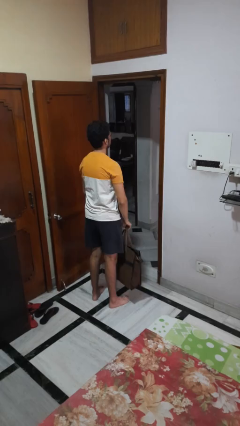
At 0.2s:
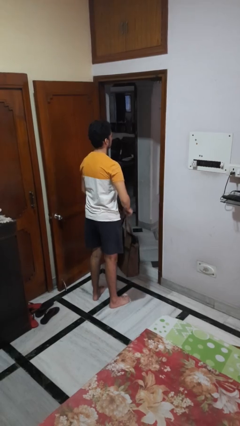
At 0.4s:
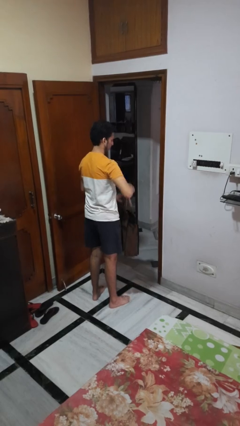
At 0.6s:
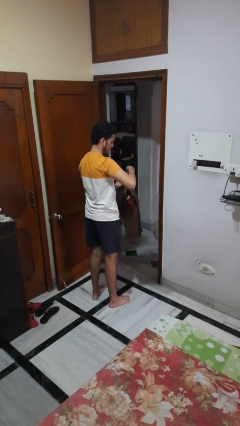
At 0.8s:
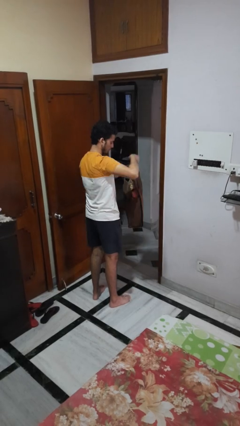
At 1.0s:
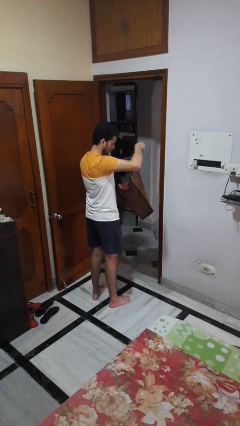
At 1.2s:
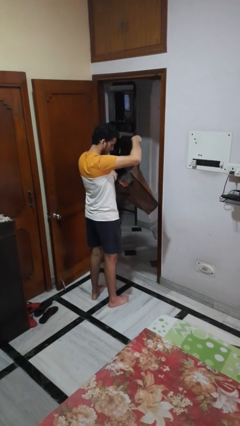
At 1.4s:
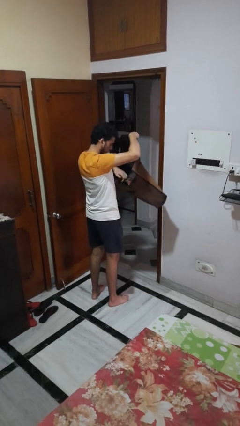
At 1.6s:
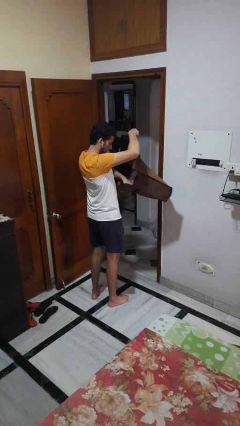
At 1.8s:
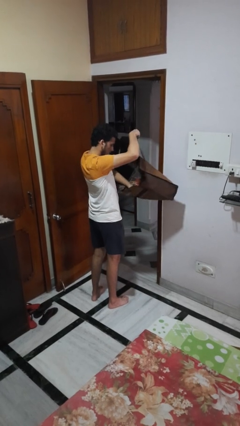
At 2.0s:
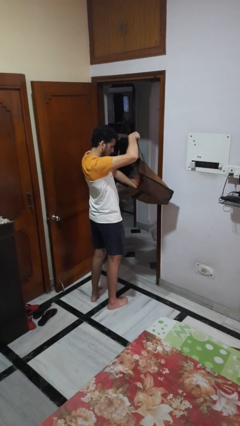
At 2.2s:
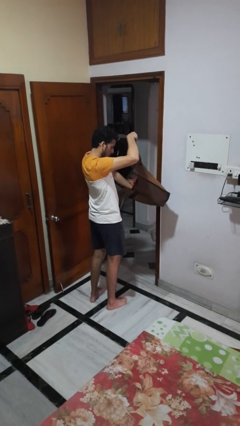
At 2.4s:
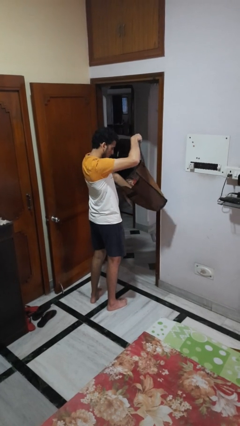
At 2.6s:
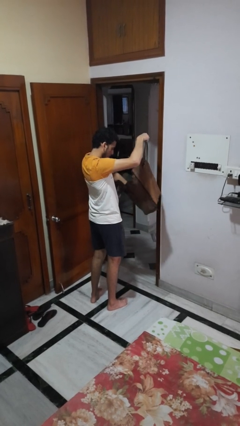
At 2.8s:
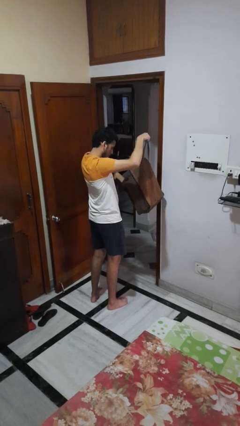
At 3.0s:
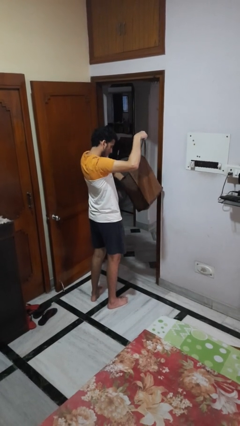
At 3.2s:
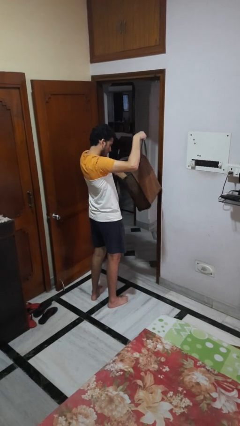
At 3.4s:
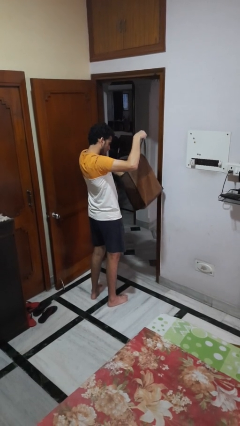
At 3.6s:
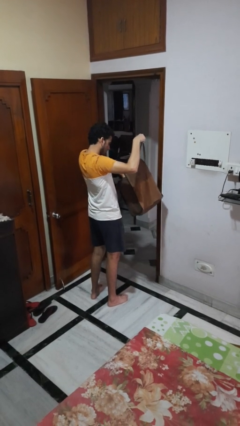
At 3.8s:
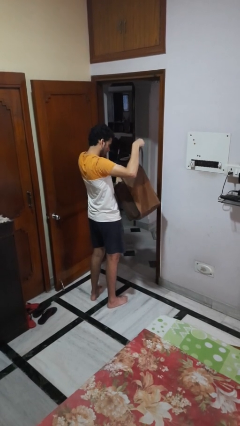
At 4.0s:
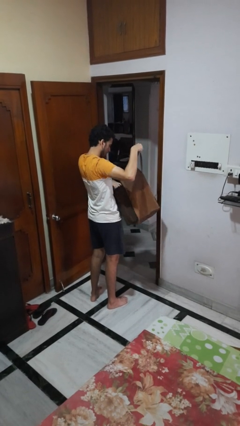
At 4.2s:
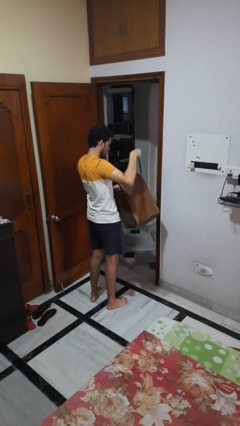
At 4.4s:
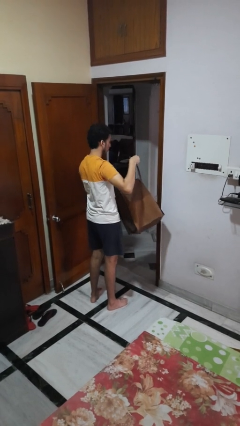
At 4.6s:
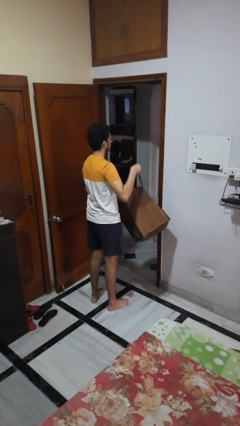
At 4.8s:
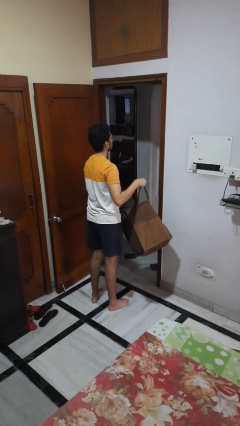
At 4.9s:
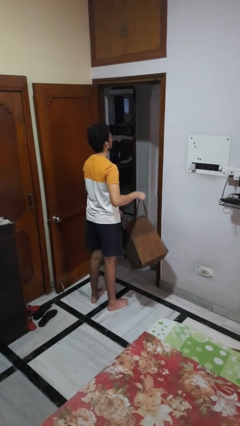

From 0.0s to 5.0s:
person searches in bag

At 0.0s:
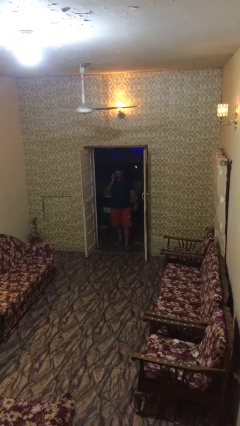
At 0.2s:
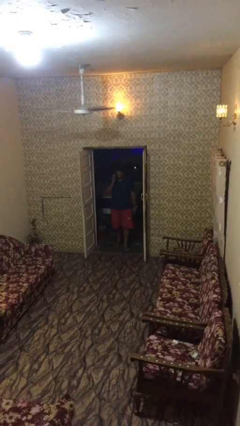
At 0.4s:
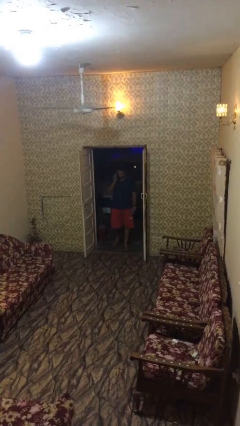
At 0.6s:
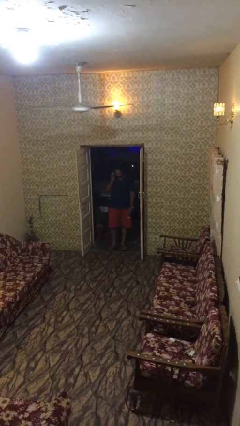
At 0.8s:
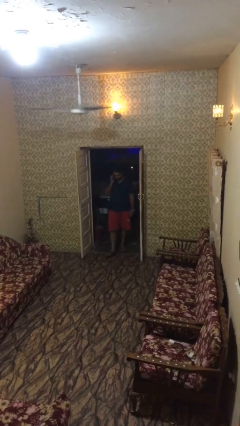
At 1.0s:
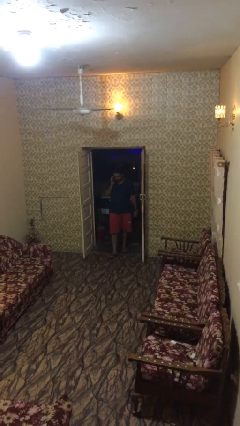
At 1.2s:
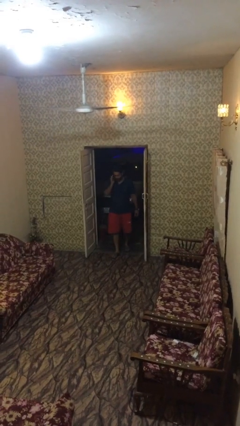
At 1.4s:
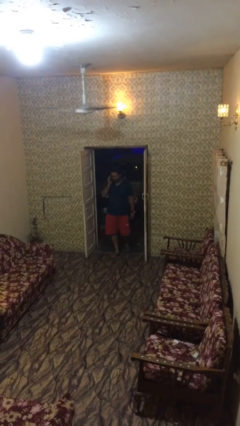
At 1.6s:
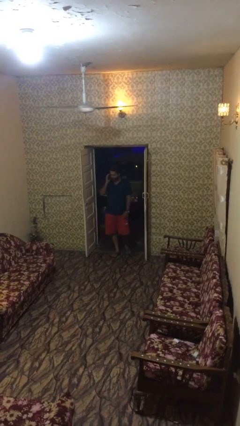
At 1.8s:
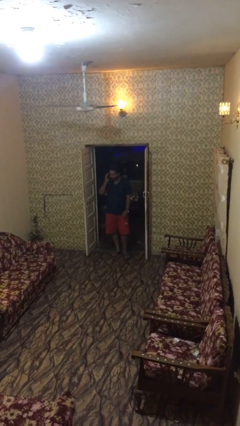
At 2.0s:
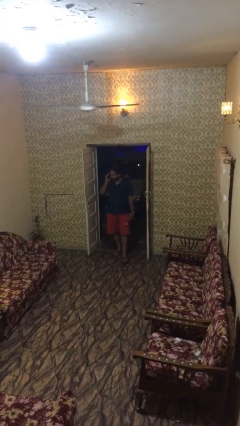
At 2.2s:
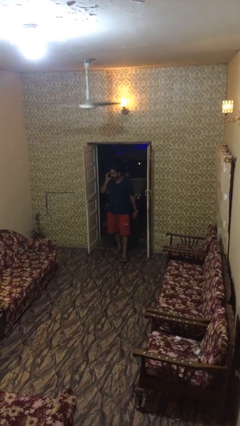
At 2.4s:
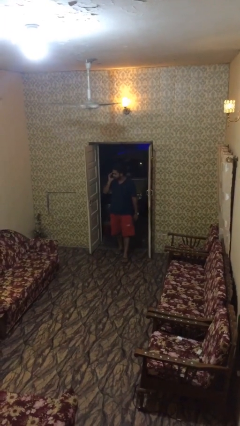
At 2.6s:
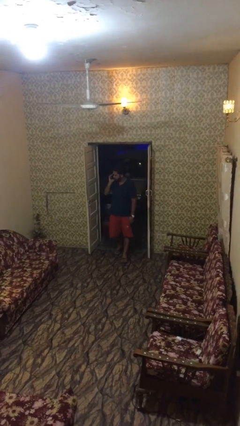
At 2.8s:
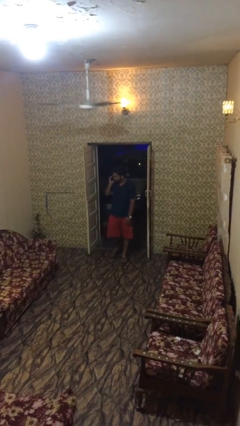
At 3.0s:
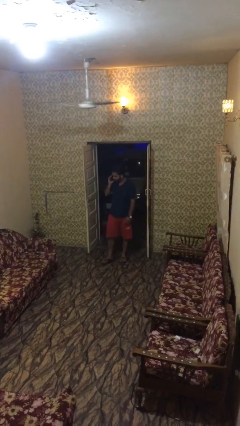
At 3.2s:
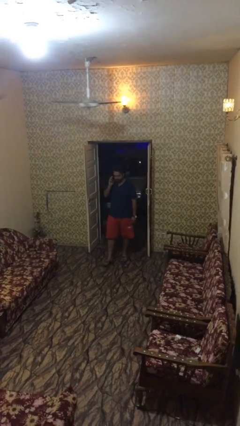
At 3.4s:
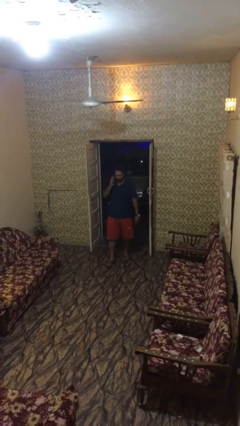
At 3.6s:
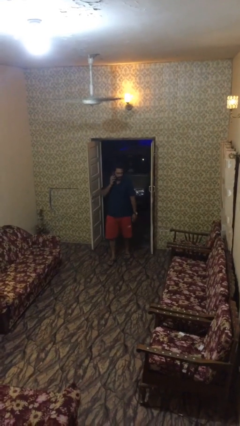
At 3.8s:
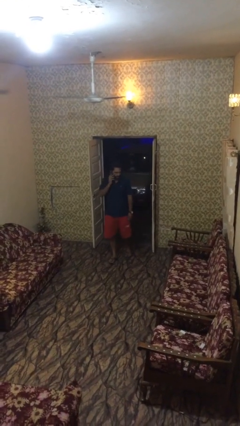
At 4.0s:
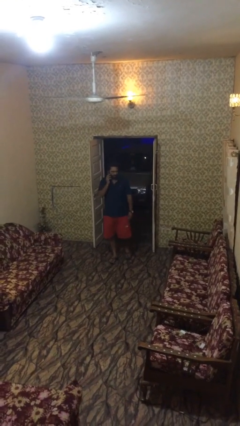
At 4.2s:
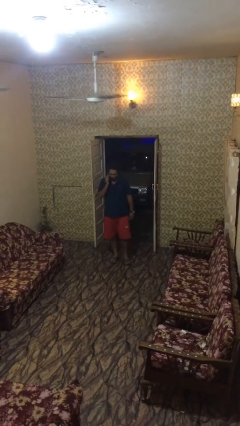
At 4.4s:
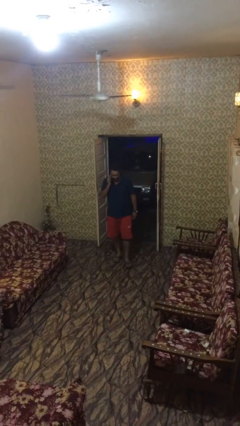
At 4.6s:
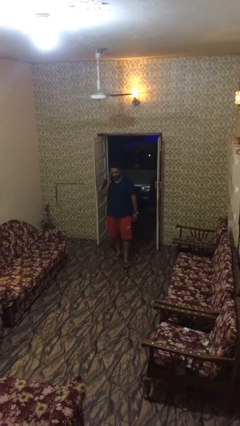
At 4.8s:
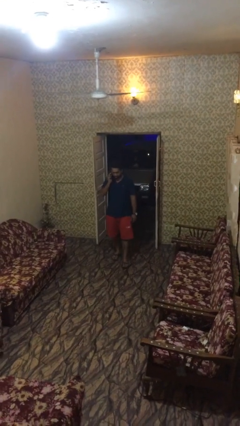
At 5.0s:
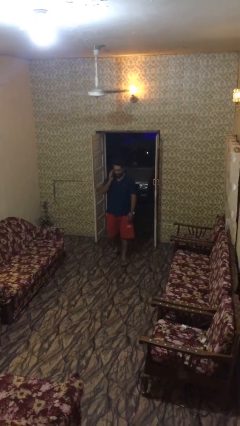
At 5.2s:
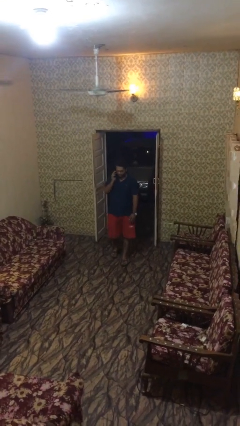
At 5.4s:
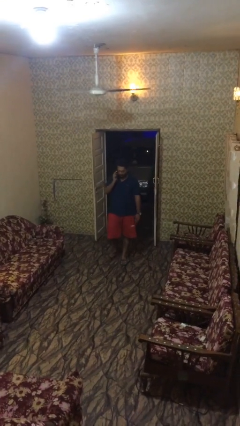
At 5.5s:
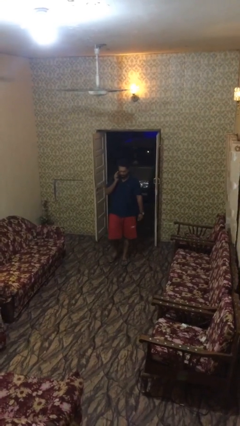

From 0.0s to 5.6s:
person enters scene through structure

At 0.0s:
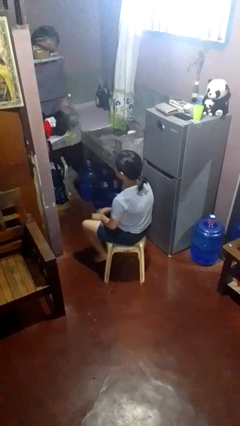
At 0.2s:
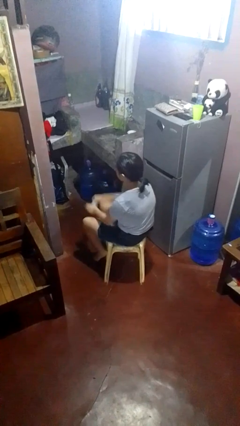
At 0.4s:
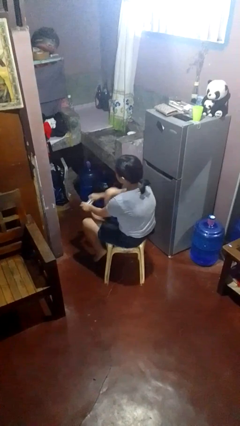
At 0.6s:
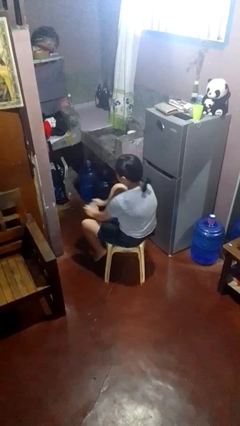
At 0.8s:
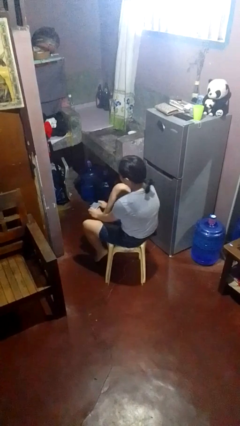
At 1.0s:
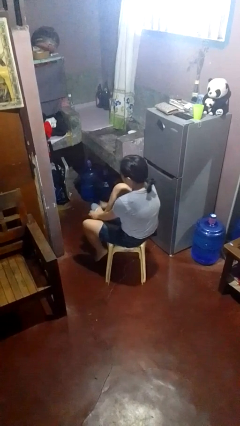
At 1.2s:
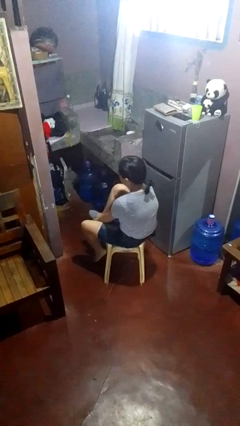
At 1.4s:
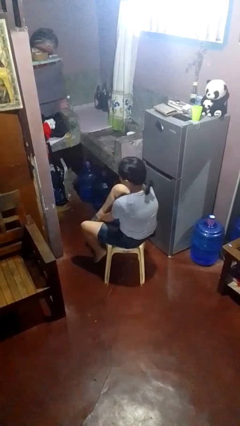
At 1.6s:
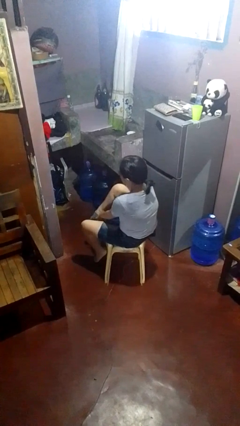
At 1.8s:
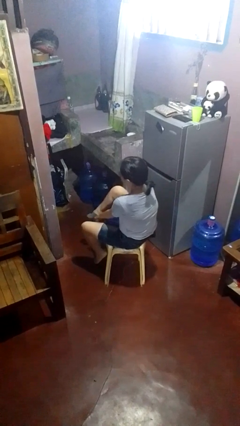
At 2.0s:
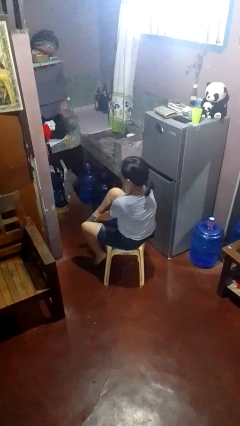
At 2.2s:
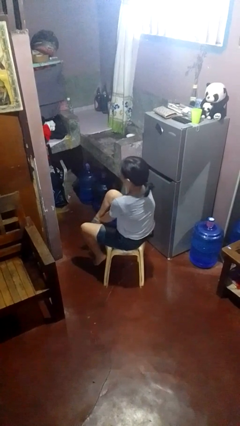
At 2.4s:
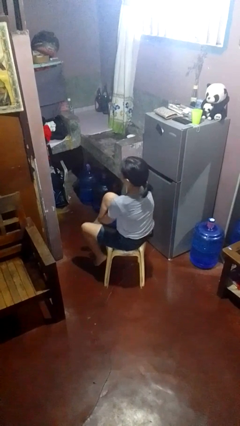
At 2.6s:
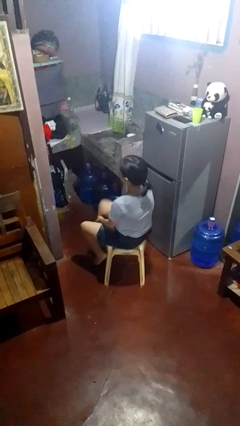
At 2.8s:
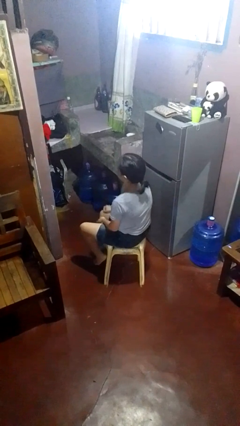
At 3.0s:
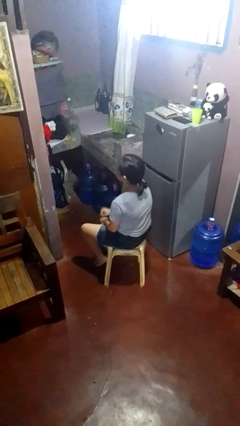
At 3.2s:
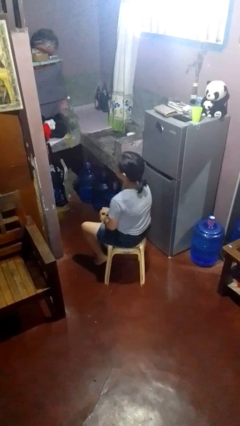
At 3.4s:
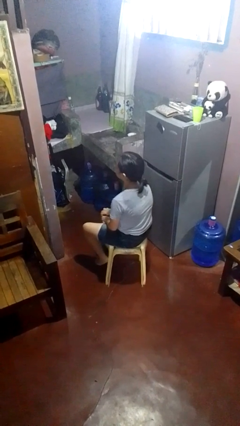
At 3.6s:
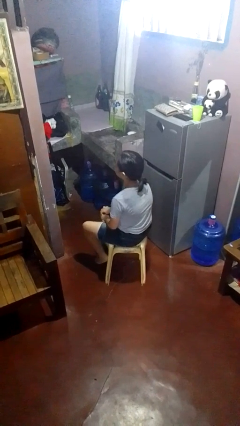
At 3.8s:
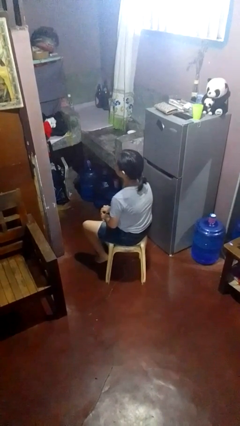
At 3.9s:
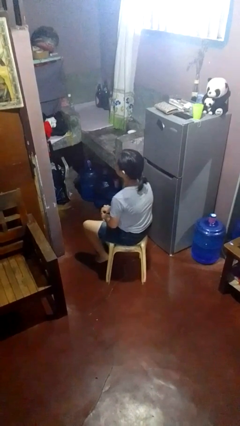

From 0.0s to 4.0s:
person puts on socks

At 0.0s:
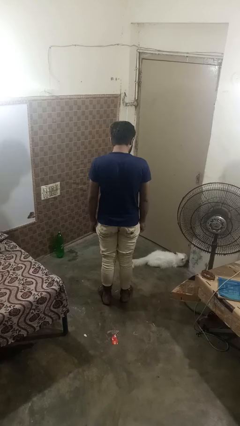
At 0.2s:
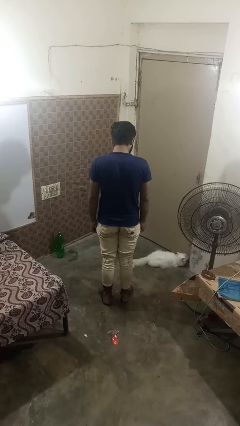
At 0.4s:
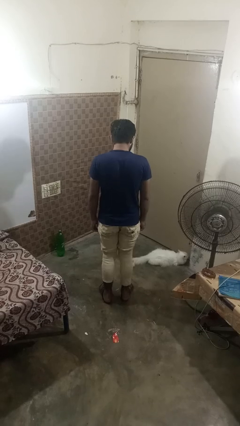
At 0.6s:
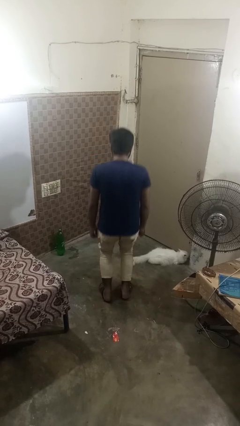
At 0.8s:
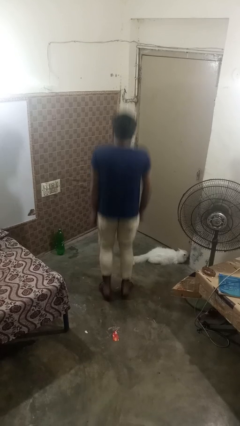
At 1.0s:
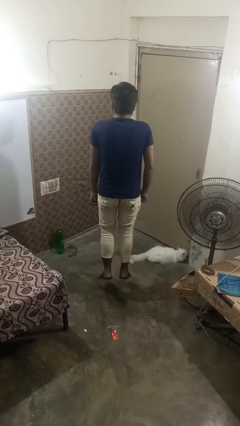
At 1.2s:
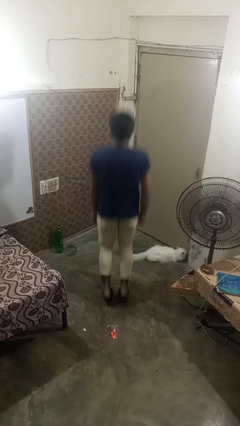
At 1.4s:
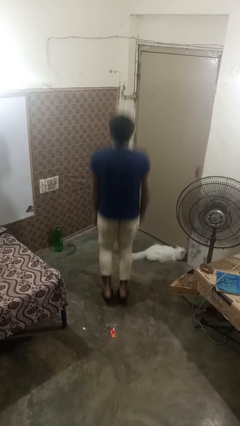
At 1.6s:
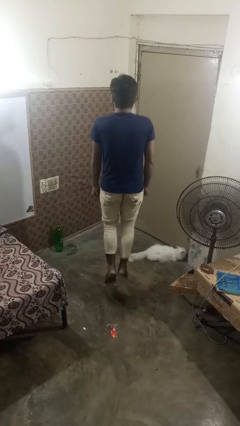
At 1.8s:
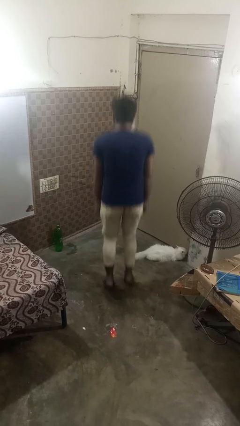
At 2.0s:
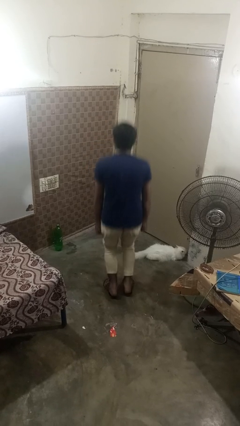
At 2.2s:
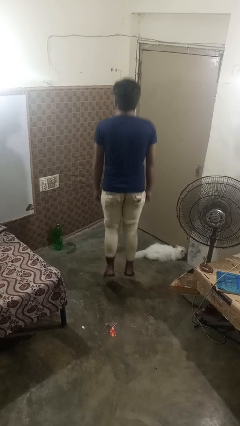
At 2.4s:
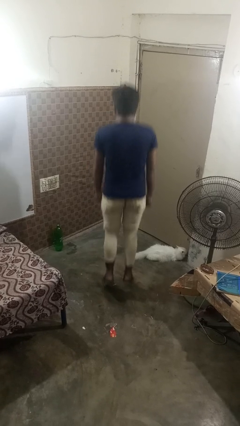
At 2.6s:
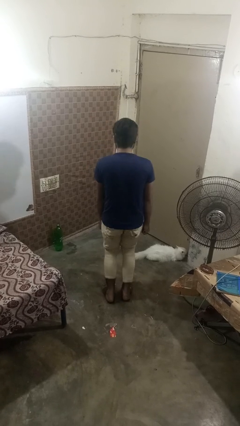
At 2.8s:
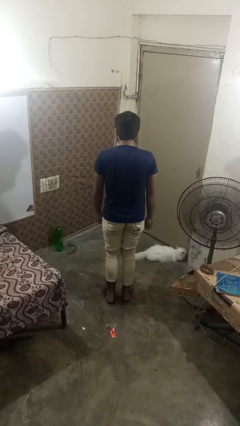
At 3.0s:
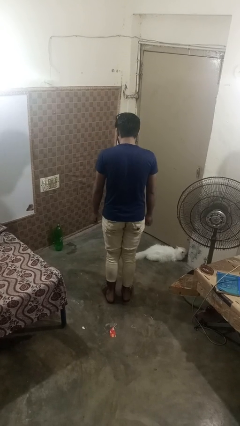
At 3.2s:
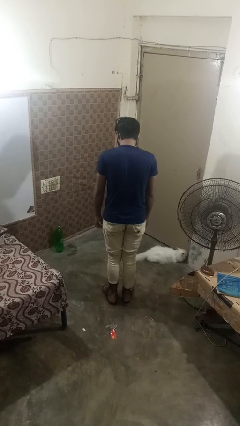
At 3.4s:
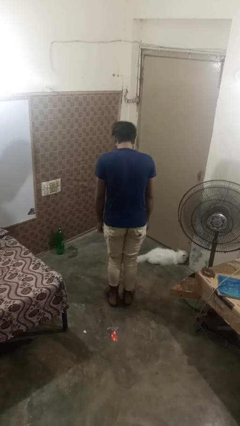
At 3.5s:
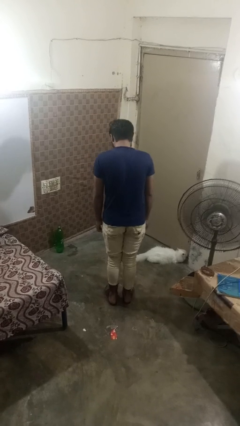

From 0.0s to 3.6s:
person jumps
